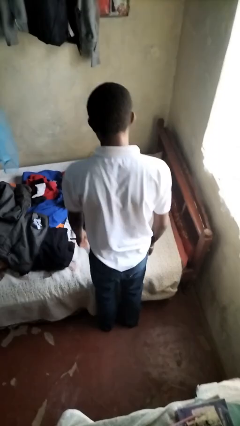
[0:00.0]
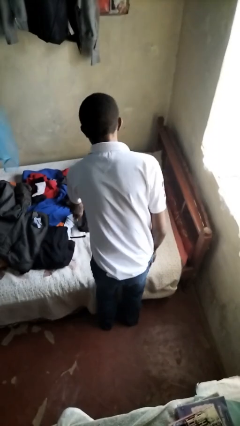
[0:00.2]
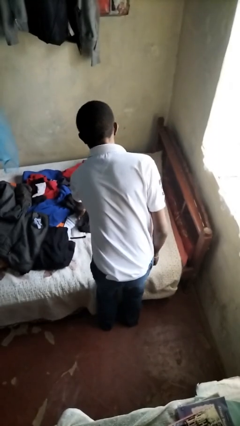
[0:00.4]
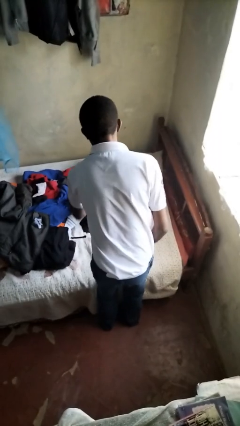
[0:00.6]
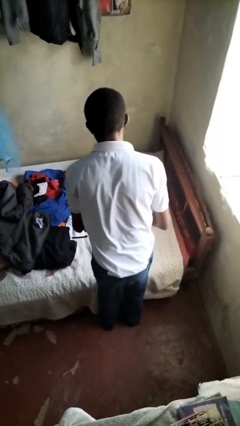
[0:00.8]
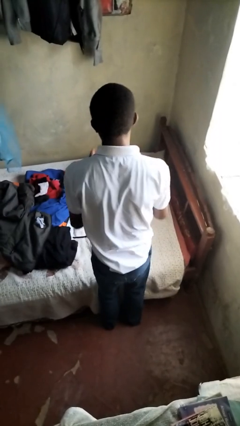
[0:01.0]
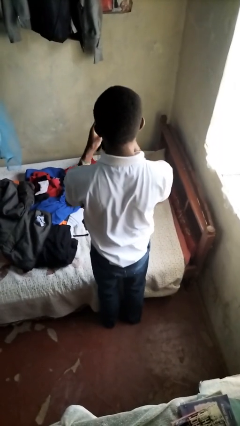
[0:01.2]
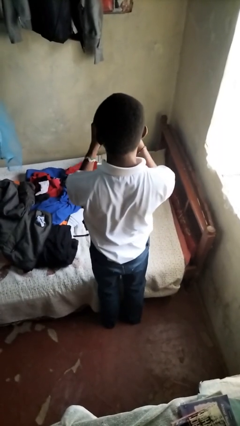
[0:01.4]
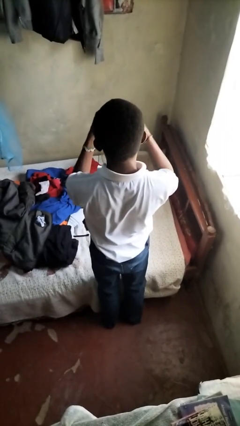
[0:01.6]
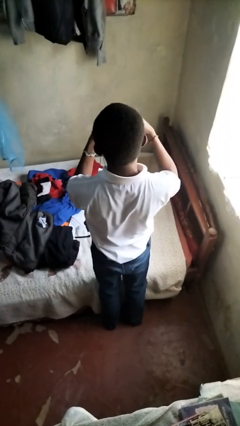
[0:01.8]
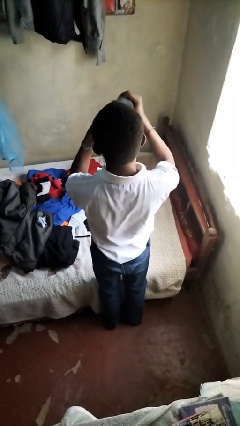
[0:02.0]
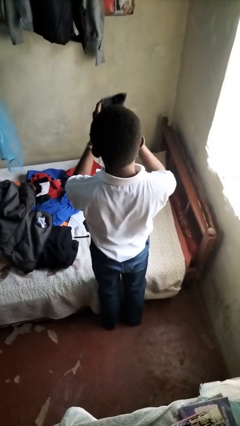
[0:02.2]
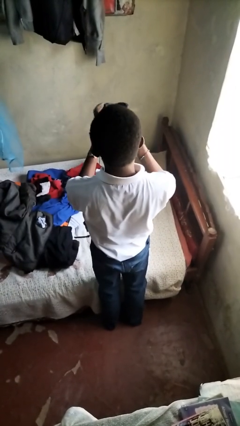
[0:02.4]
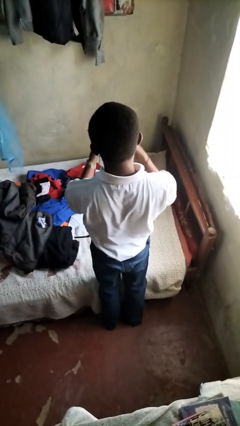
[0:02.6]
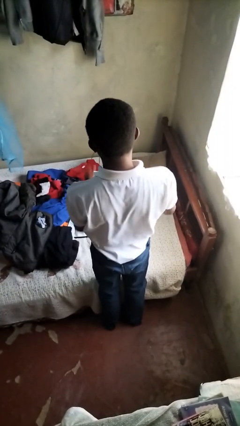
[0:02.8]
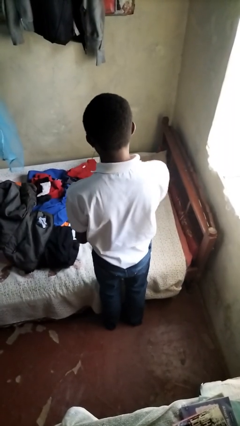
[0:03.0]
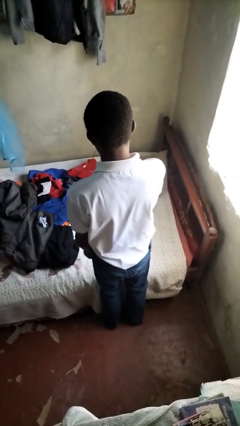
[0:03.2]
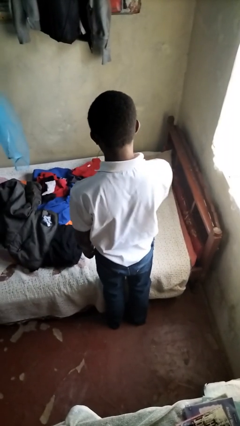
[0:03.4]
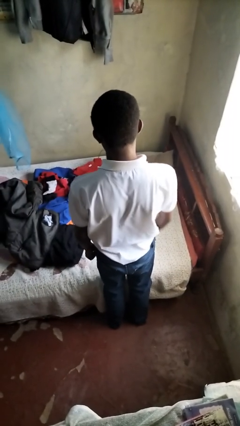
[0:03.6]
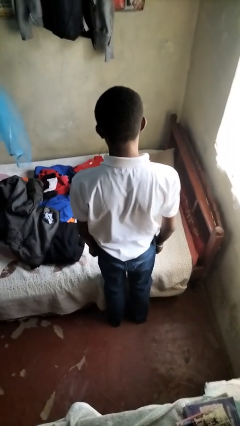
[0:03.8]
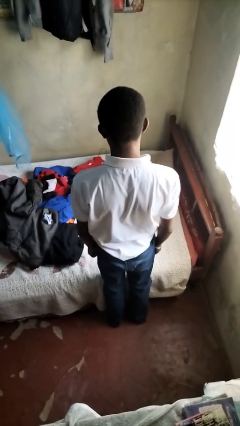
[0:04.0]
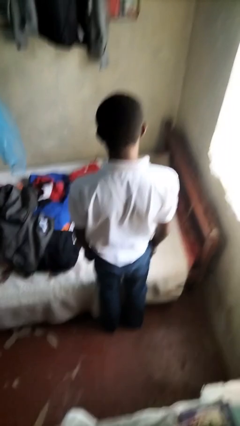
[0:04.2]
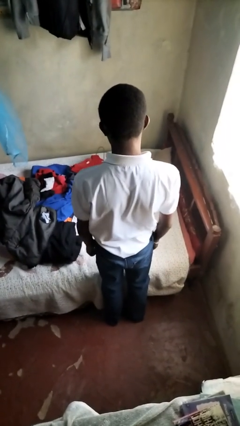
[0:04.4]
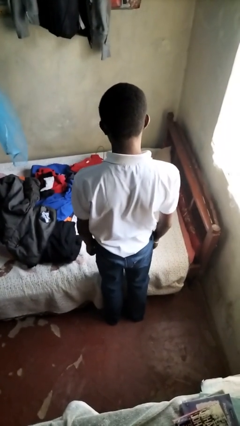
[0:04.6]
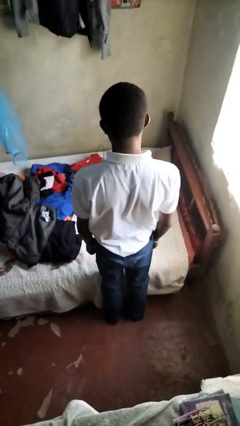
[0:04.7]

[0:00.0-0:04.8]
person folds socks

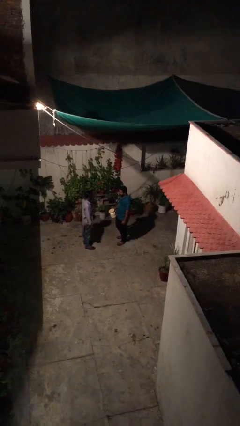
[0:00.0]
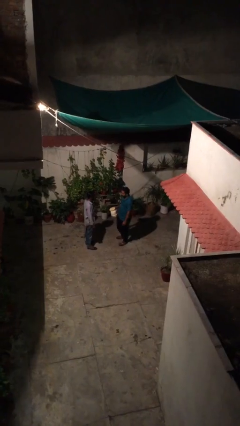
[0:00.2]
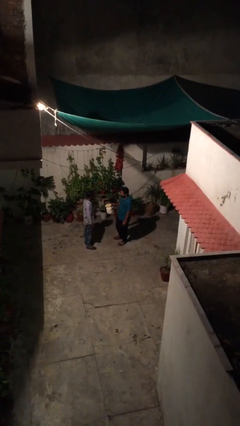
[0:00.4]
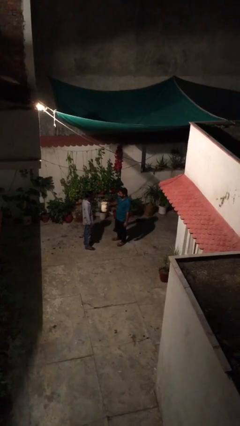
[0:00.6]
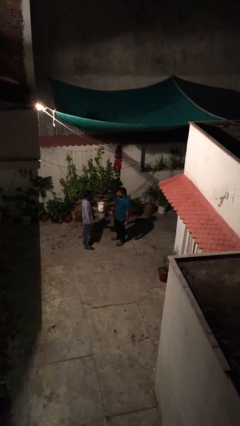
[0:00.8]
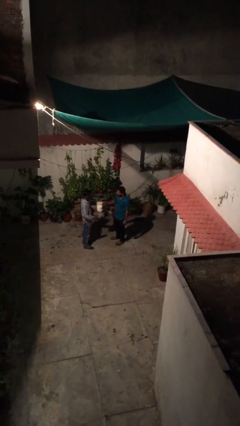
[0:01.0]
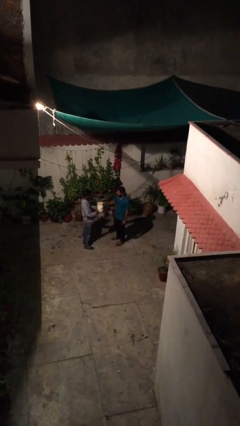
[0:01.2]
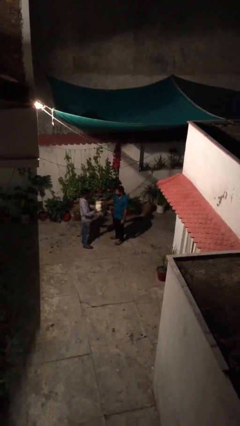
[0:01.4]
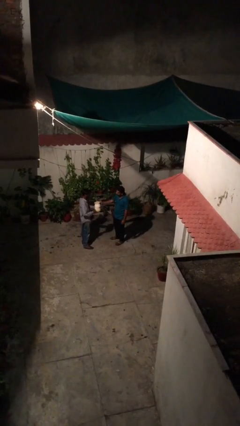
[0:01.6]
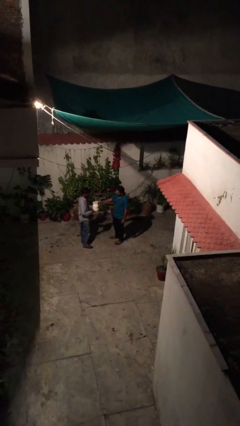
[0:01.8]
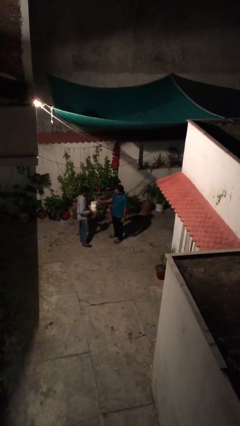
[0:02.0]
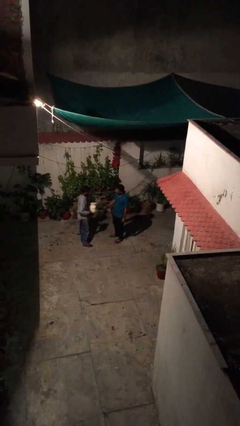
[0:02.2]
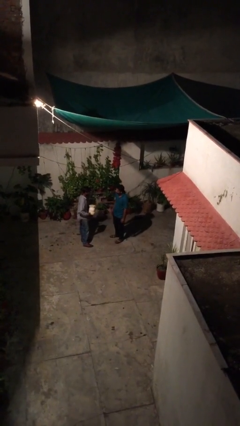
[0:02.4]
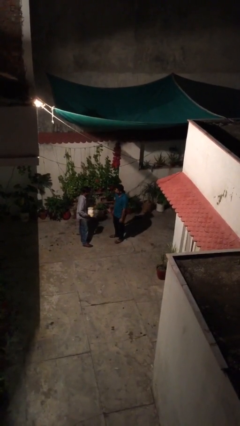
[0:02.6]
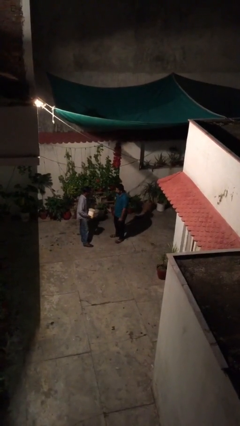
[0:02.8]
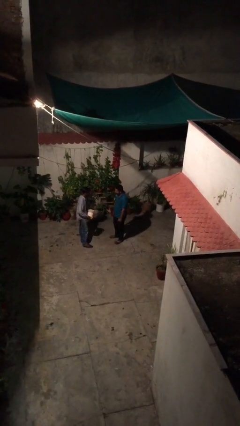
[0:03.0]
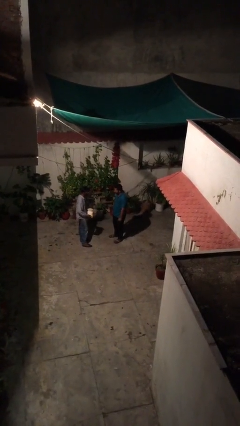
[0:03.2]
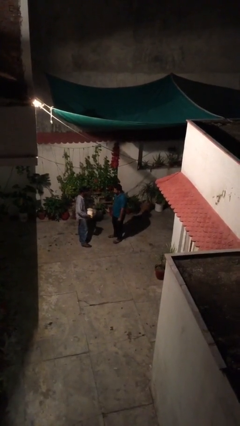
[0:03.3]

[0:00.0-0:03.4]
person transfers object to person

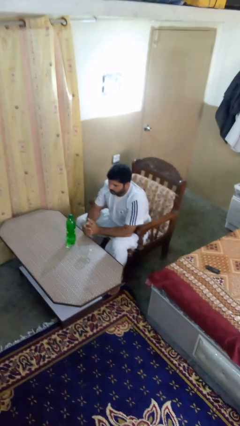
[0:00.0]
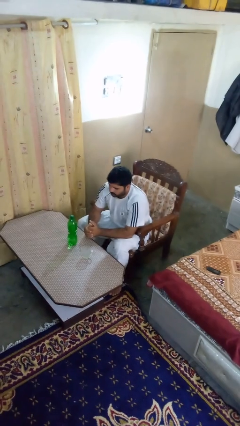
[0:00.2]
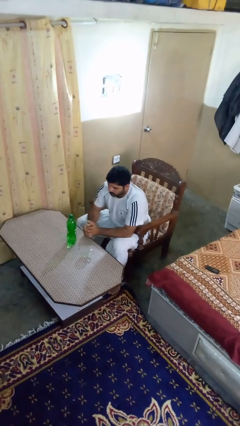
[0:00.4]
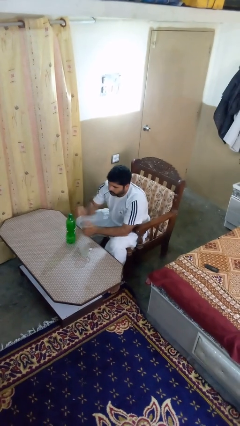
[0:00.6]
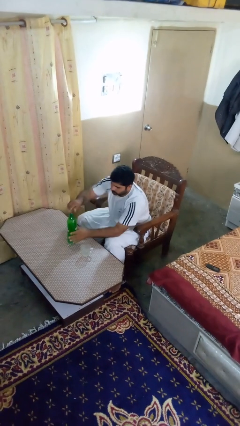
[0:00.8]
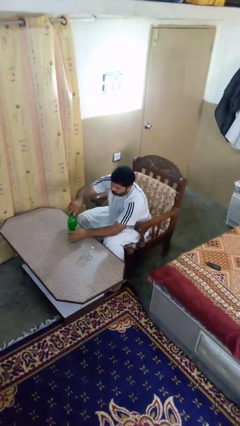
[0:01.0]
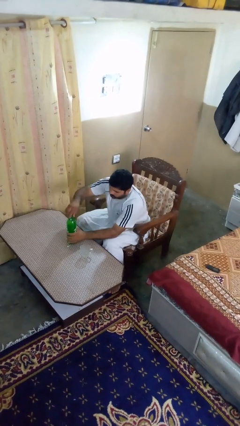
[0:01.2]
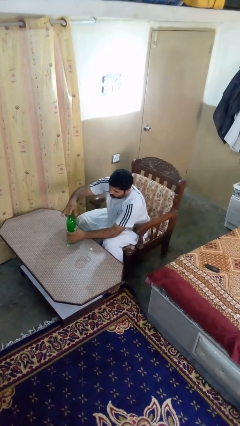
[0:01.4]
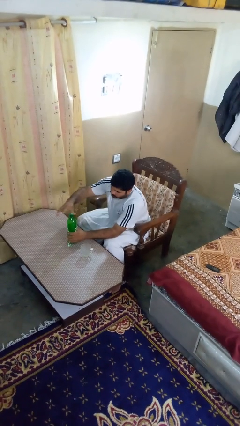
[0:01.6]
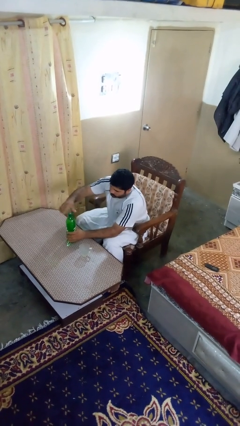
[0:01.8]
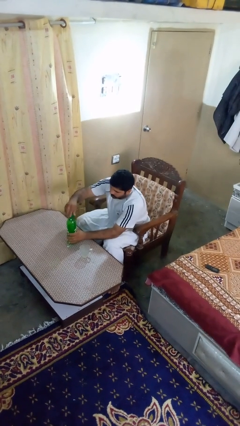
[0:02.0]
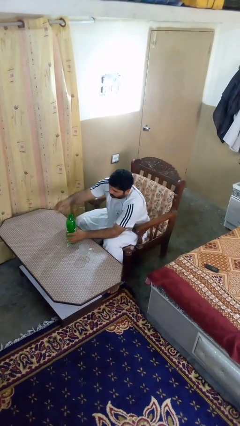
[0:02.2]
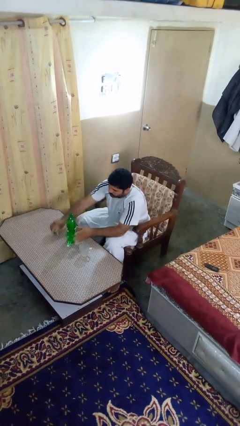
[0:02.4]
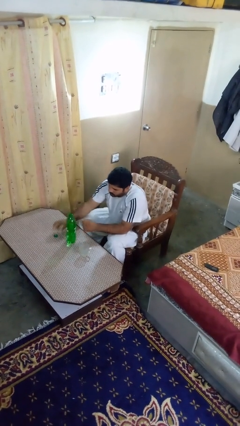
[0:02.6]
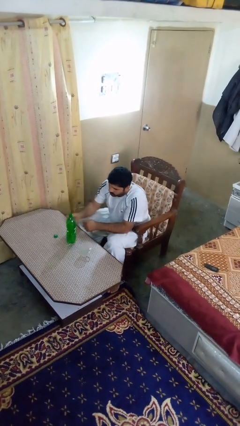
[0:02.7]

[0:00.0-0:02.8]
person unscrews lid from bottle

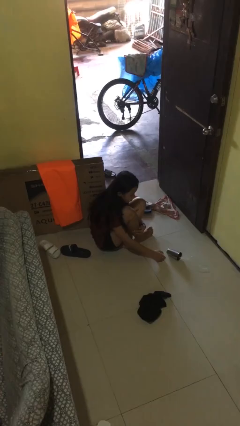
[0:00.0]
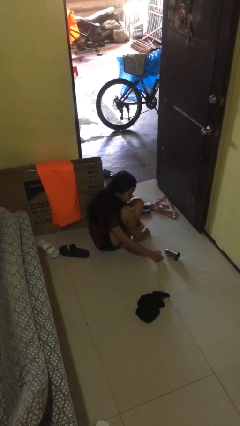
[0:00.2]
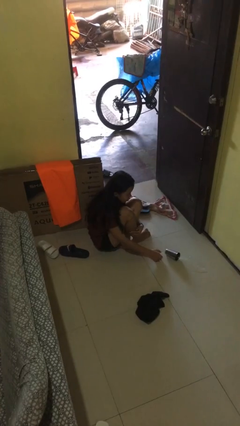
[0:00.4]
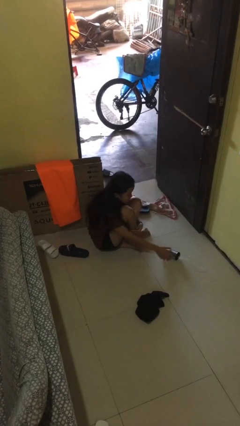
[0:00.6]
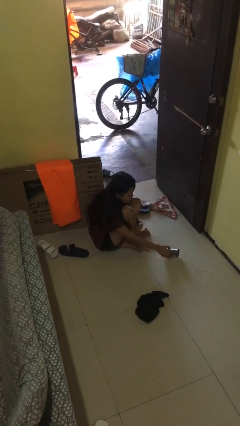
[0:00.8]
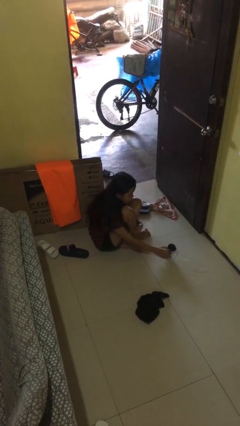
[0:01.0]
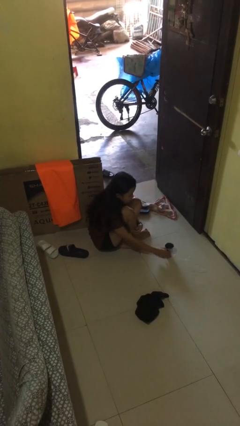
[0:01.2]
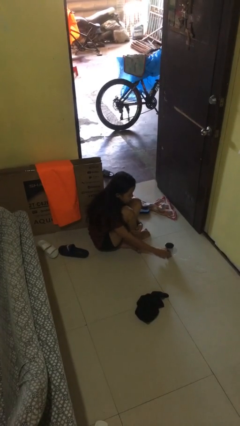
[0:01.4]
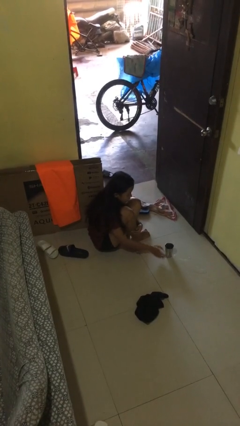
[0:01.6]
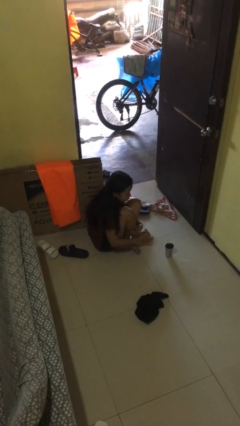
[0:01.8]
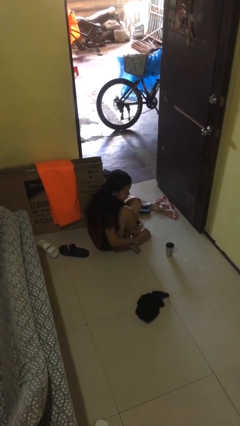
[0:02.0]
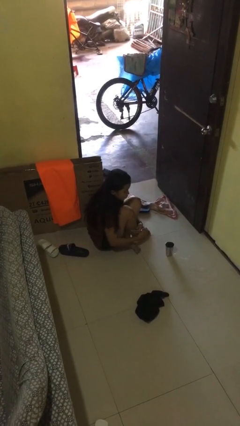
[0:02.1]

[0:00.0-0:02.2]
person sets upright glass

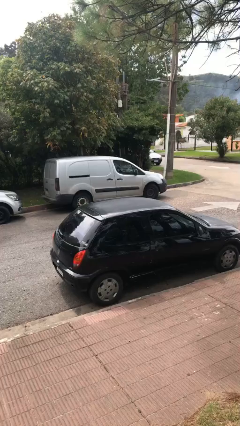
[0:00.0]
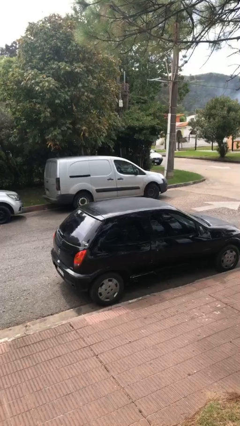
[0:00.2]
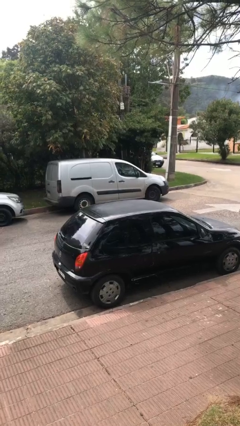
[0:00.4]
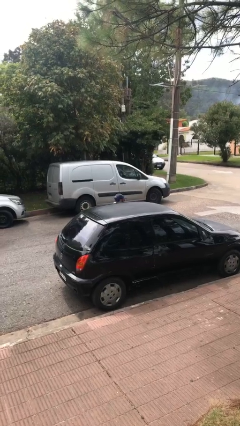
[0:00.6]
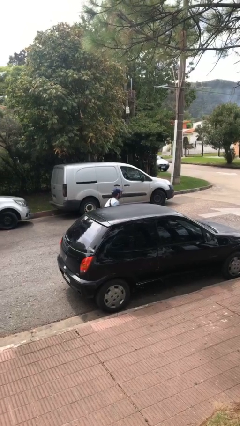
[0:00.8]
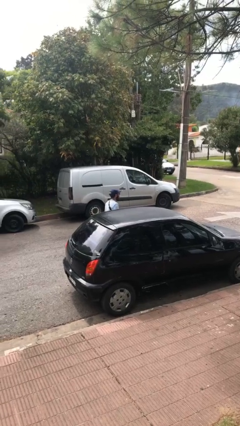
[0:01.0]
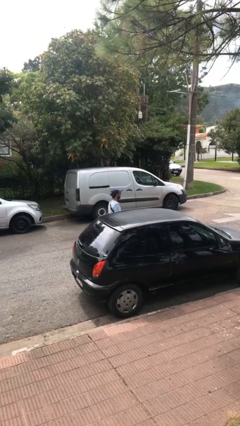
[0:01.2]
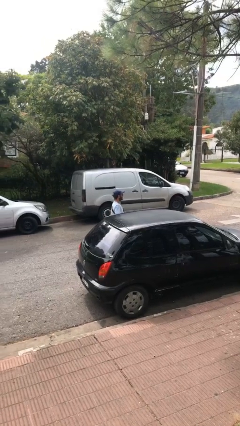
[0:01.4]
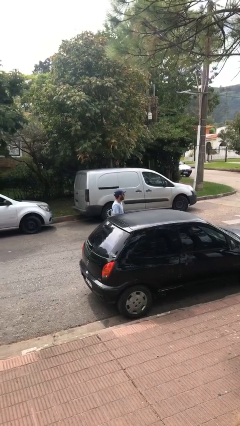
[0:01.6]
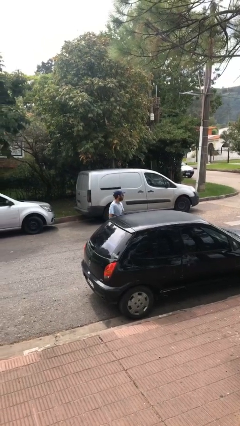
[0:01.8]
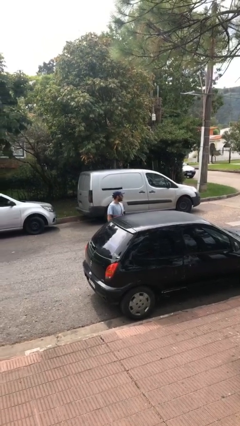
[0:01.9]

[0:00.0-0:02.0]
person exits car

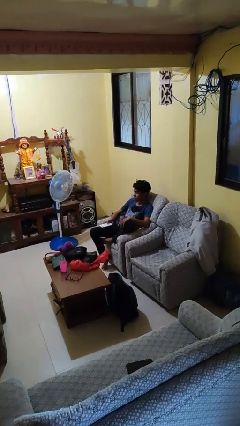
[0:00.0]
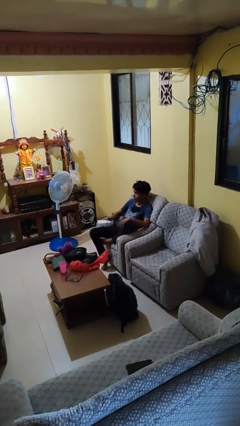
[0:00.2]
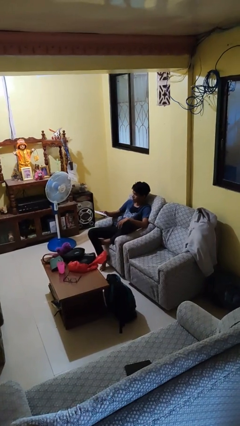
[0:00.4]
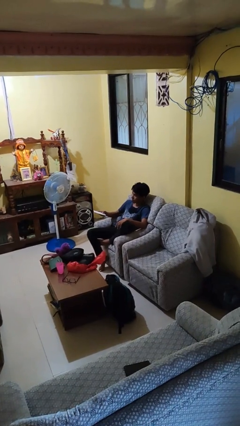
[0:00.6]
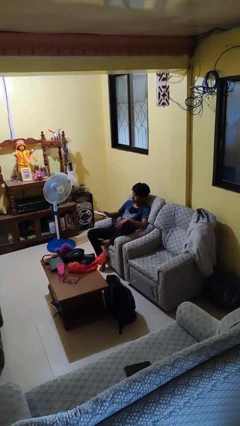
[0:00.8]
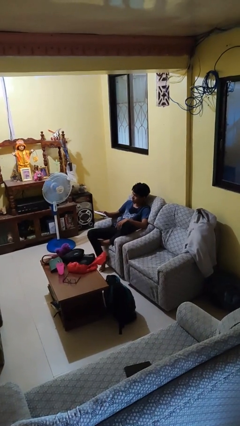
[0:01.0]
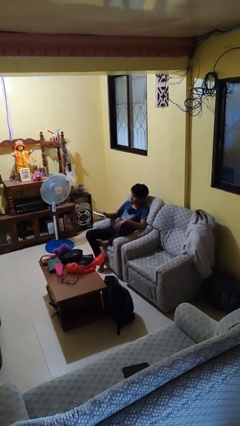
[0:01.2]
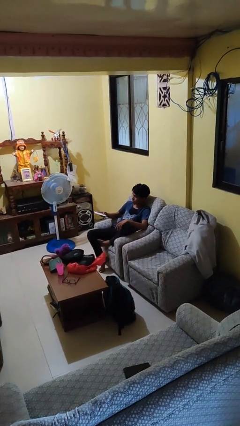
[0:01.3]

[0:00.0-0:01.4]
person uses television remote

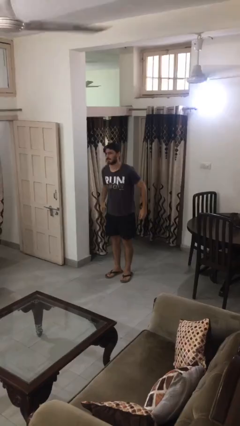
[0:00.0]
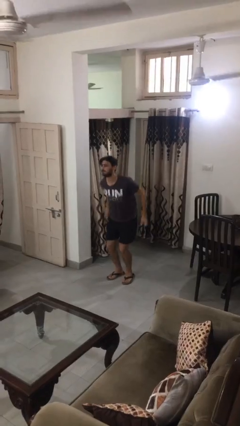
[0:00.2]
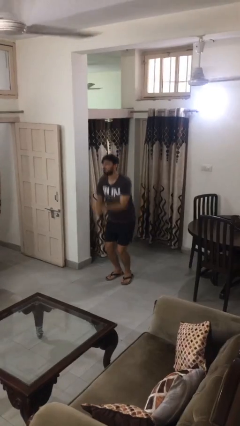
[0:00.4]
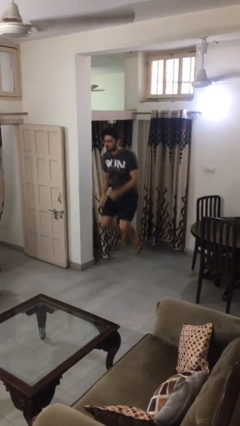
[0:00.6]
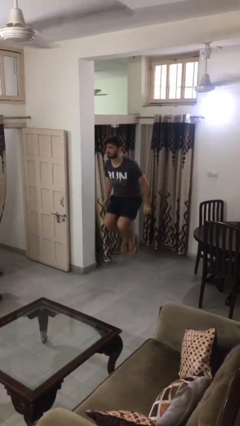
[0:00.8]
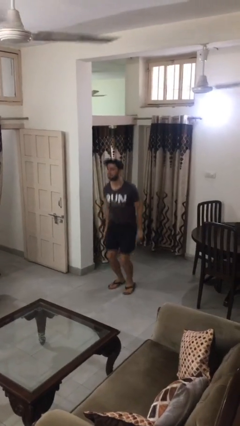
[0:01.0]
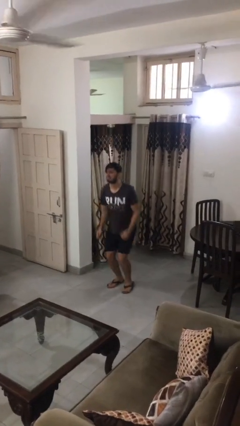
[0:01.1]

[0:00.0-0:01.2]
person jumps
